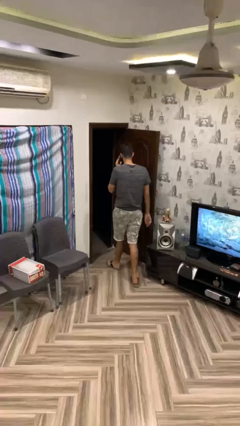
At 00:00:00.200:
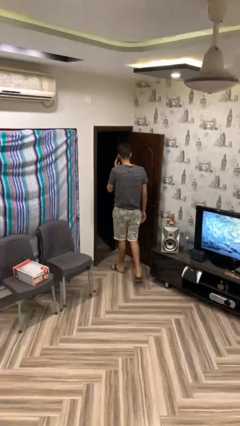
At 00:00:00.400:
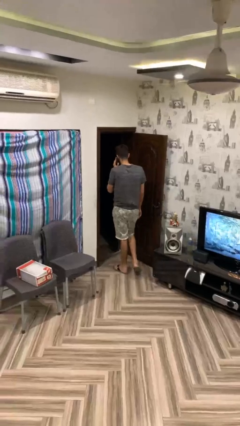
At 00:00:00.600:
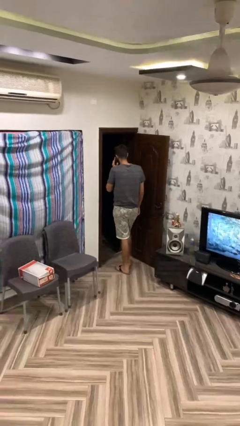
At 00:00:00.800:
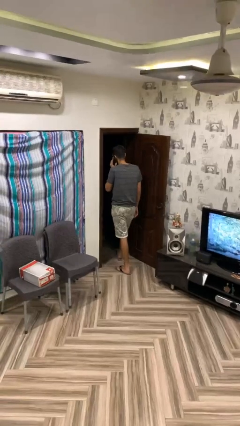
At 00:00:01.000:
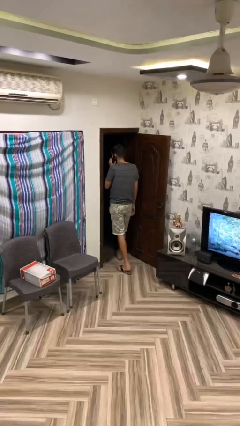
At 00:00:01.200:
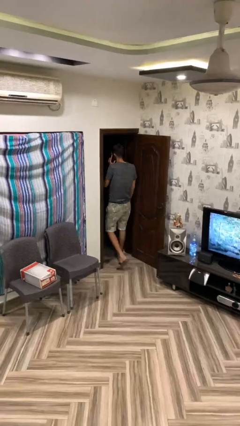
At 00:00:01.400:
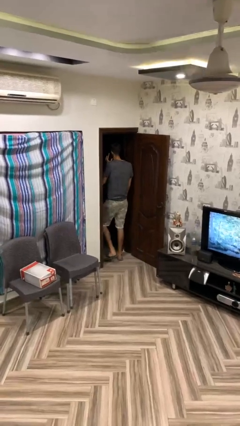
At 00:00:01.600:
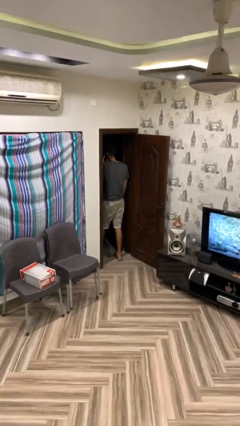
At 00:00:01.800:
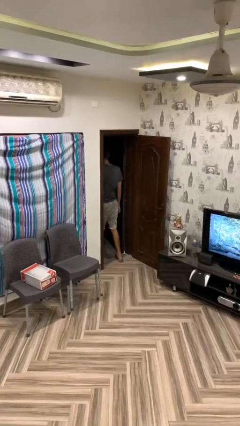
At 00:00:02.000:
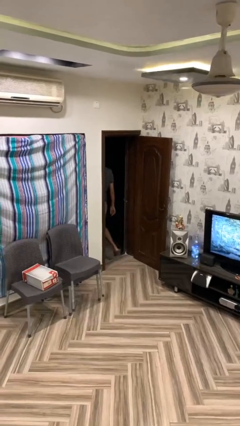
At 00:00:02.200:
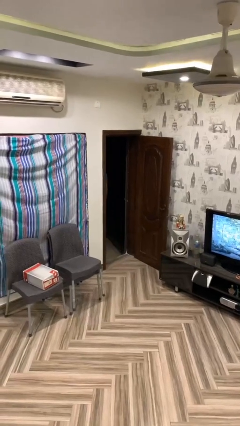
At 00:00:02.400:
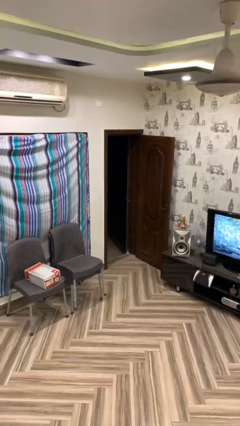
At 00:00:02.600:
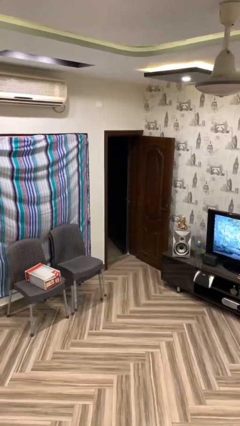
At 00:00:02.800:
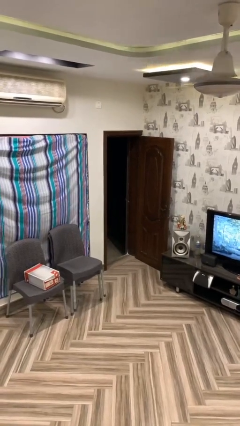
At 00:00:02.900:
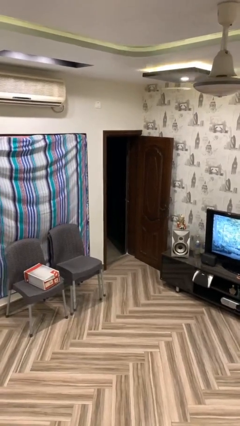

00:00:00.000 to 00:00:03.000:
person exits scene through structure

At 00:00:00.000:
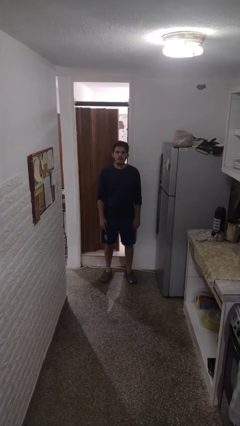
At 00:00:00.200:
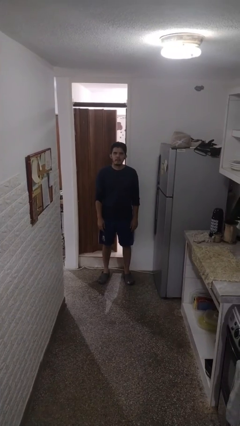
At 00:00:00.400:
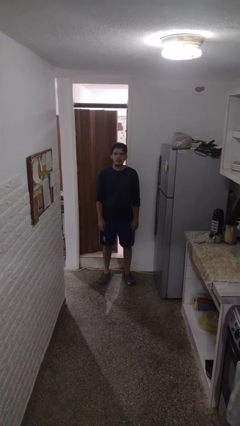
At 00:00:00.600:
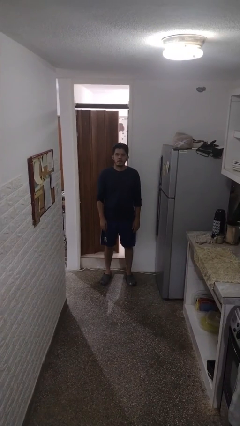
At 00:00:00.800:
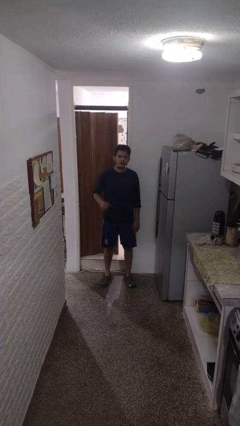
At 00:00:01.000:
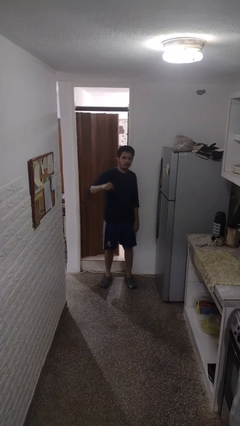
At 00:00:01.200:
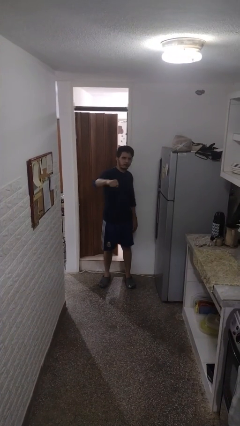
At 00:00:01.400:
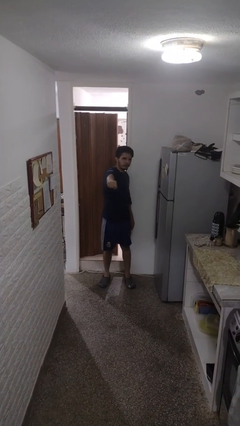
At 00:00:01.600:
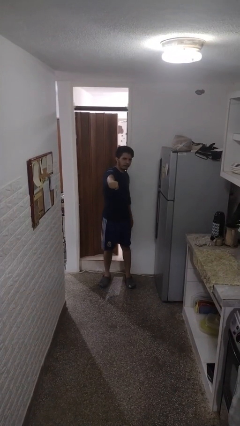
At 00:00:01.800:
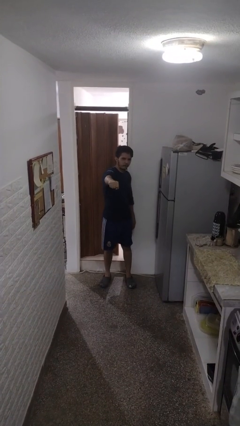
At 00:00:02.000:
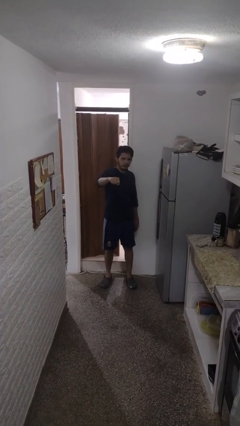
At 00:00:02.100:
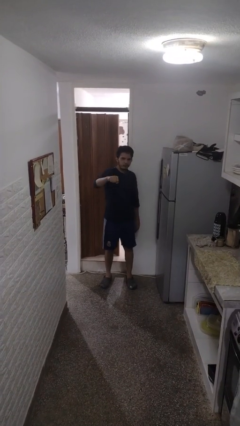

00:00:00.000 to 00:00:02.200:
person punches

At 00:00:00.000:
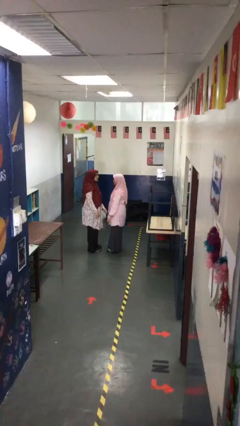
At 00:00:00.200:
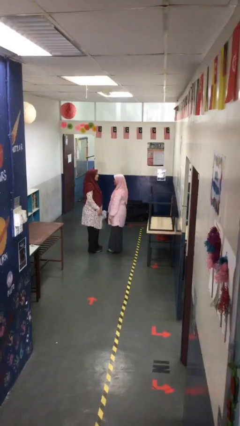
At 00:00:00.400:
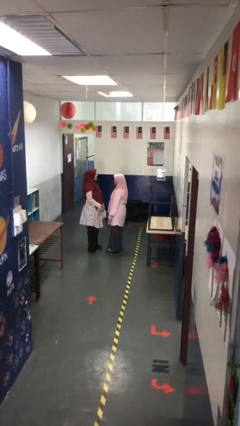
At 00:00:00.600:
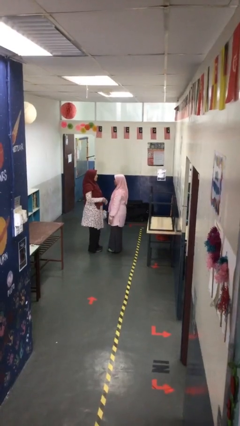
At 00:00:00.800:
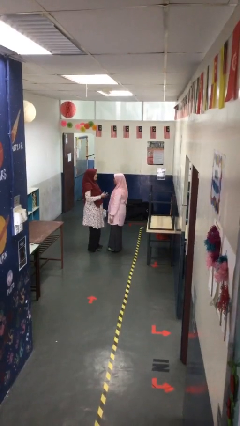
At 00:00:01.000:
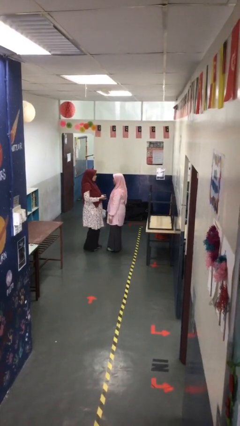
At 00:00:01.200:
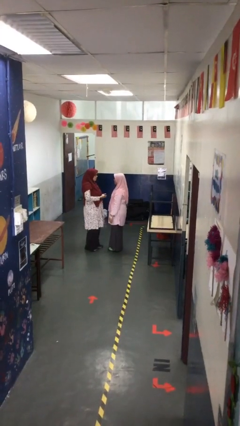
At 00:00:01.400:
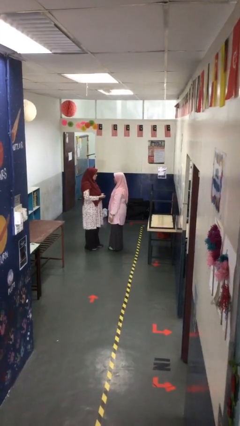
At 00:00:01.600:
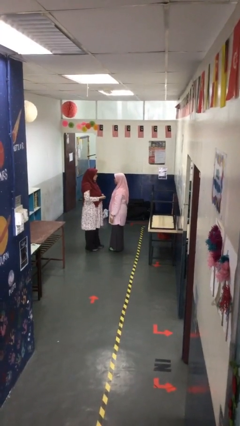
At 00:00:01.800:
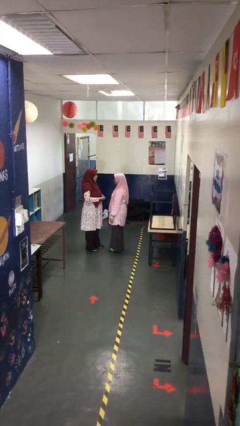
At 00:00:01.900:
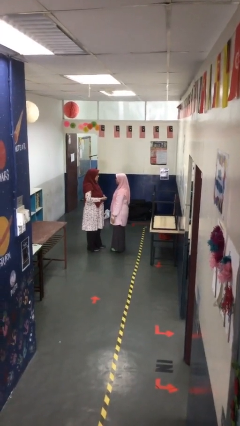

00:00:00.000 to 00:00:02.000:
person talks to person

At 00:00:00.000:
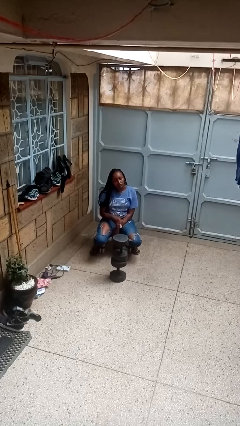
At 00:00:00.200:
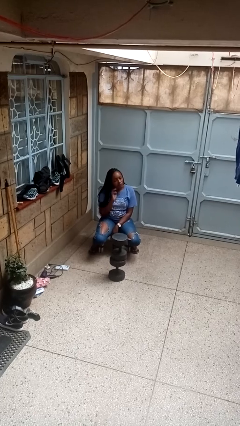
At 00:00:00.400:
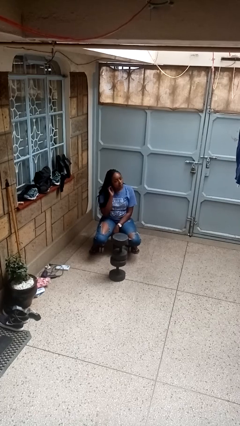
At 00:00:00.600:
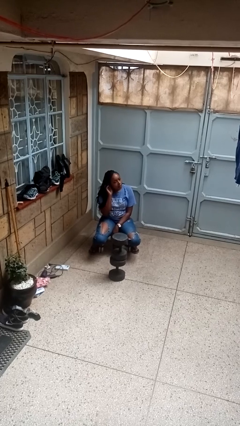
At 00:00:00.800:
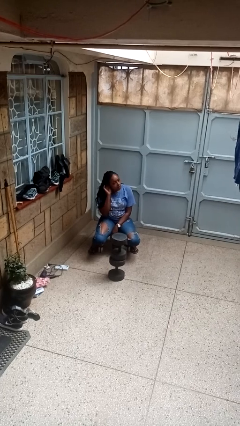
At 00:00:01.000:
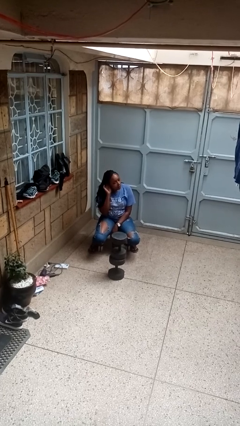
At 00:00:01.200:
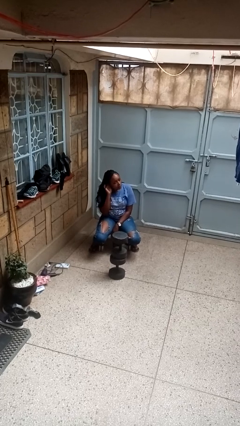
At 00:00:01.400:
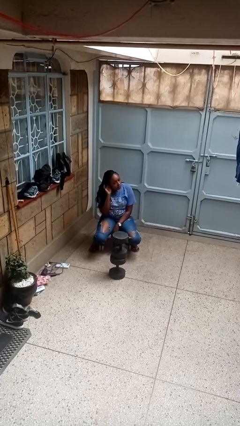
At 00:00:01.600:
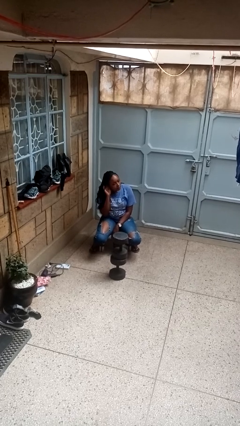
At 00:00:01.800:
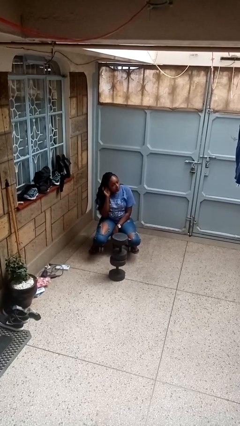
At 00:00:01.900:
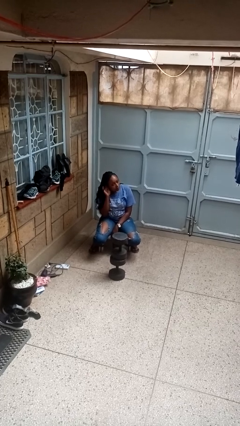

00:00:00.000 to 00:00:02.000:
person gestures listen closely

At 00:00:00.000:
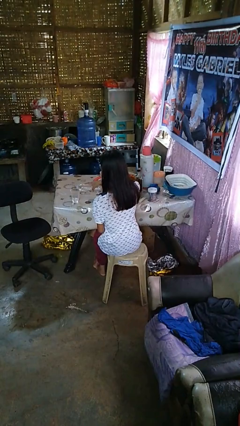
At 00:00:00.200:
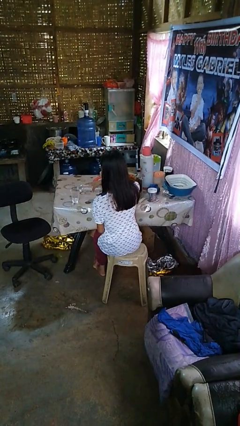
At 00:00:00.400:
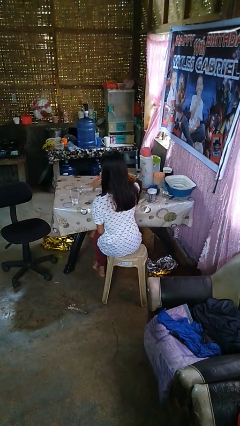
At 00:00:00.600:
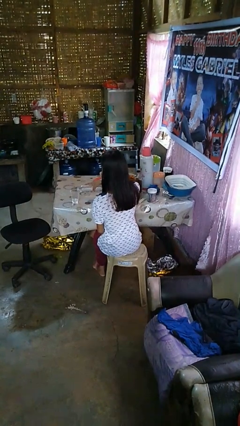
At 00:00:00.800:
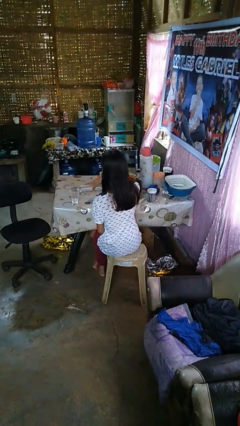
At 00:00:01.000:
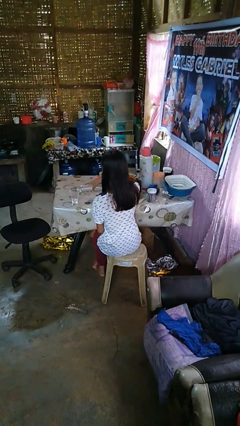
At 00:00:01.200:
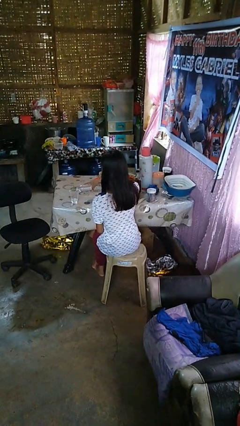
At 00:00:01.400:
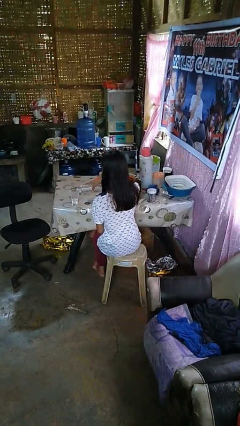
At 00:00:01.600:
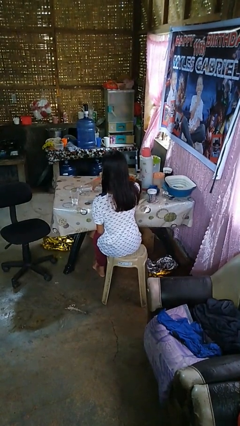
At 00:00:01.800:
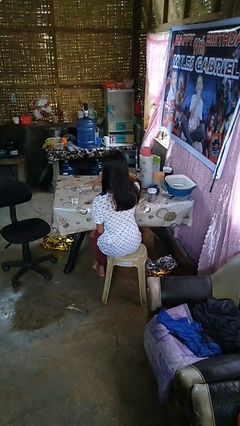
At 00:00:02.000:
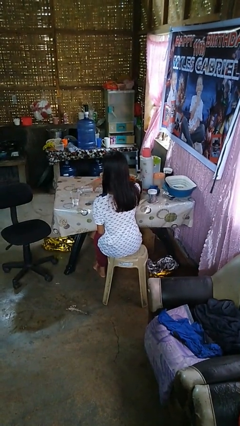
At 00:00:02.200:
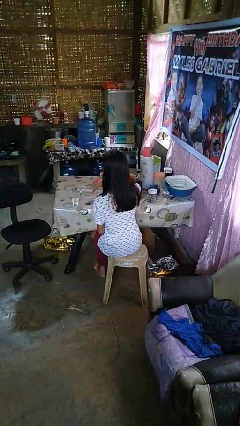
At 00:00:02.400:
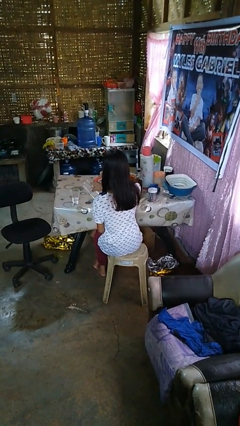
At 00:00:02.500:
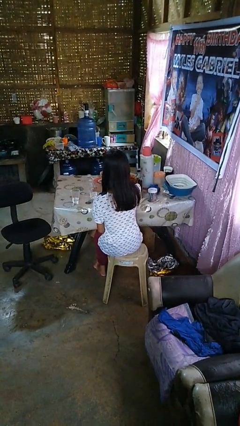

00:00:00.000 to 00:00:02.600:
person pours liquid into cup

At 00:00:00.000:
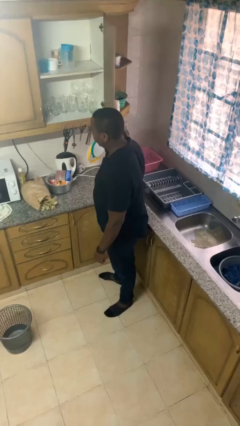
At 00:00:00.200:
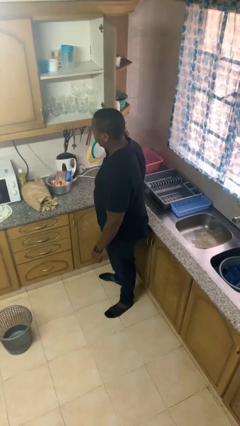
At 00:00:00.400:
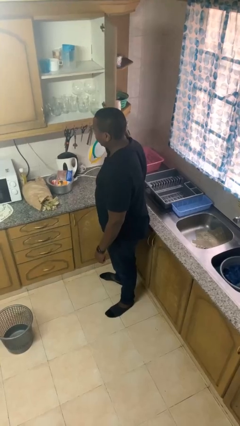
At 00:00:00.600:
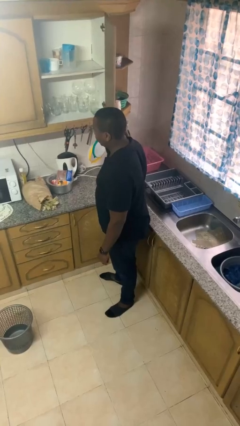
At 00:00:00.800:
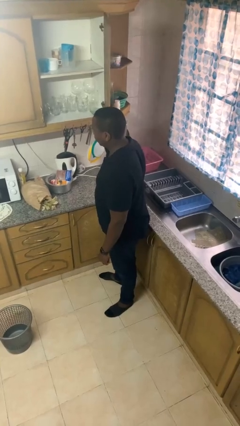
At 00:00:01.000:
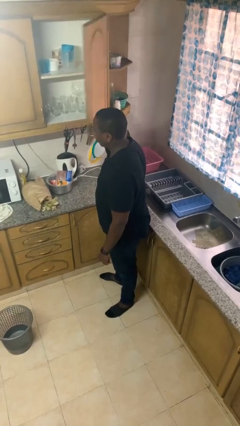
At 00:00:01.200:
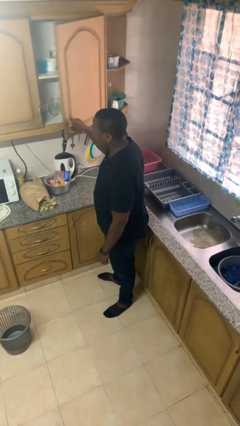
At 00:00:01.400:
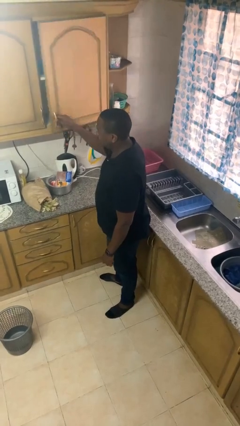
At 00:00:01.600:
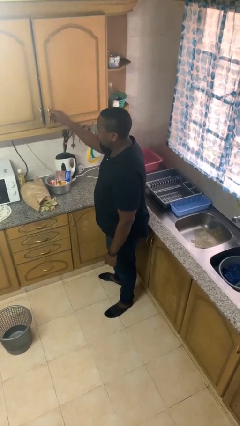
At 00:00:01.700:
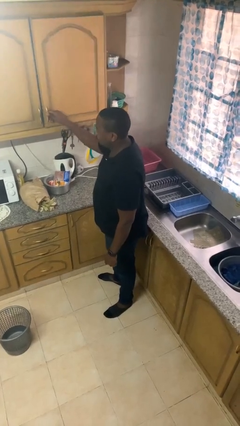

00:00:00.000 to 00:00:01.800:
person opens cabinet

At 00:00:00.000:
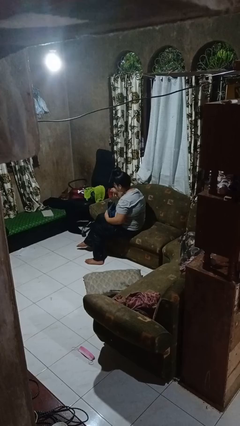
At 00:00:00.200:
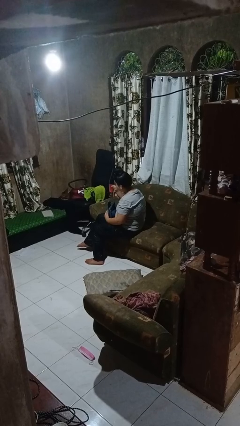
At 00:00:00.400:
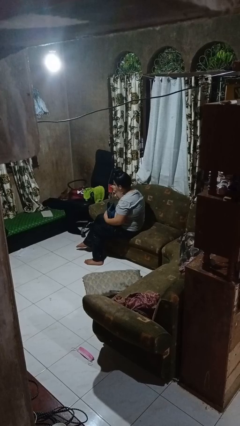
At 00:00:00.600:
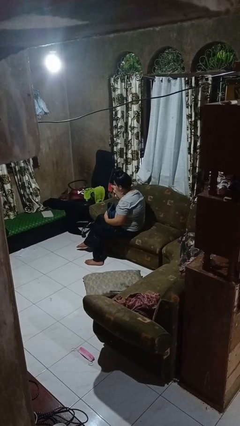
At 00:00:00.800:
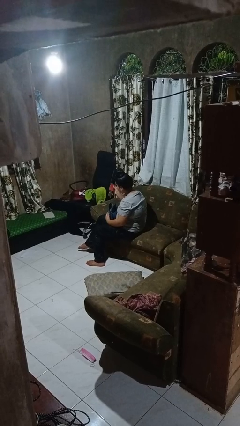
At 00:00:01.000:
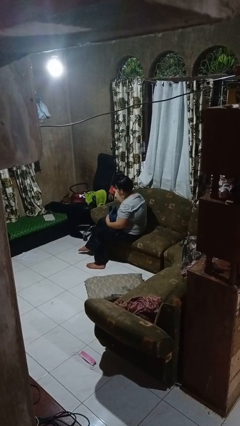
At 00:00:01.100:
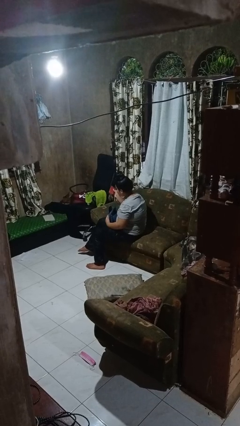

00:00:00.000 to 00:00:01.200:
person takes object from purse

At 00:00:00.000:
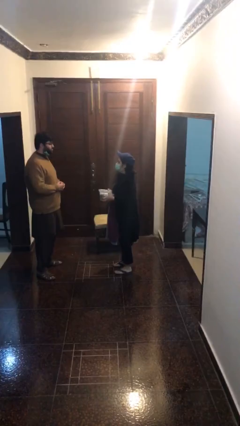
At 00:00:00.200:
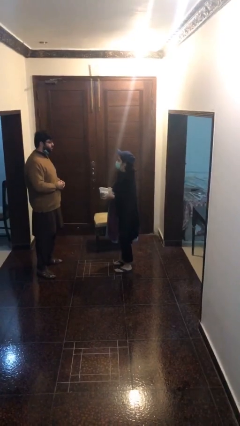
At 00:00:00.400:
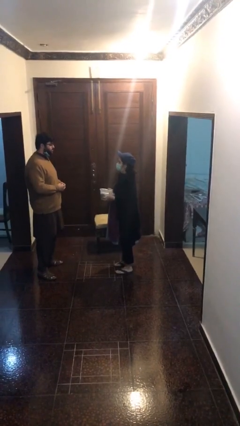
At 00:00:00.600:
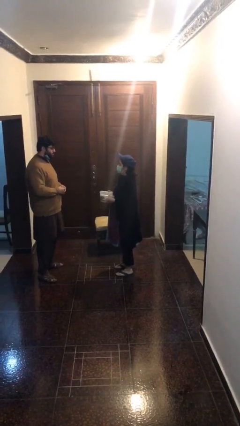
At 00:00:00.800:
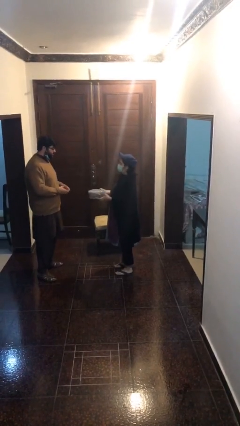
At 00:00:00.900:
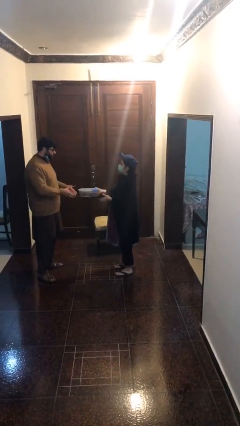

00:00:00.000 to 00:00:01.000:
person transfers object to person

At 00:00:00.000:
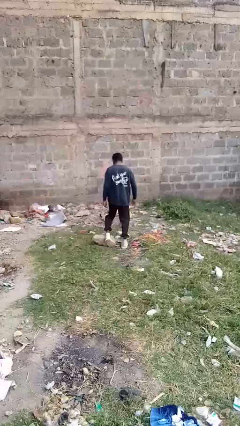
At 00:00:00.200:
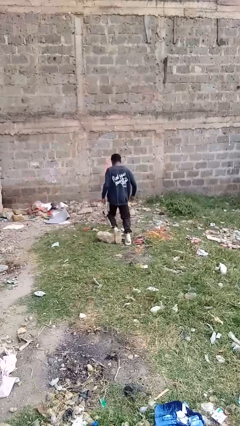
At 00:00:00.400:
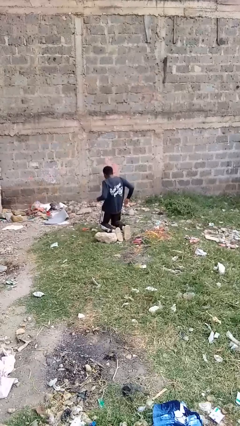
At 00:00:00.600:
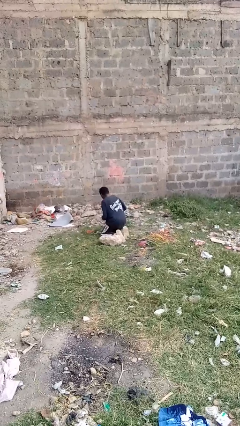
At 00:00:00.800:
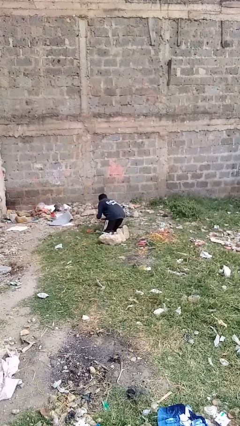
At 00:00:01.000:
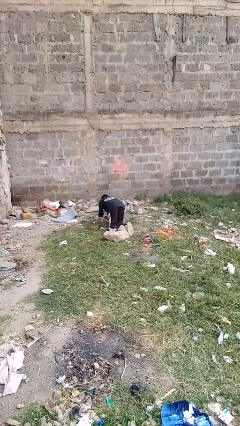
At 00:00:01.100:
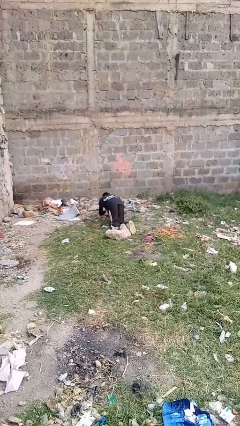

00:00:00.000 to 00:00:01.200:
person trips on object on floor
